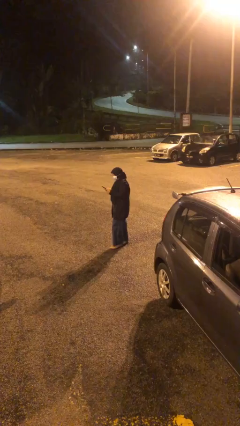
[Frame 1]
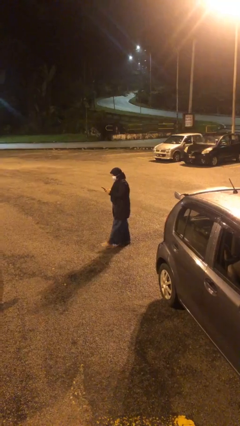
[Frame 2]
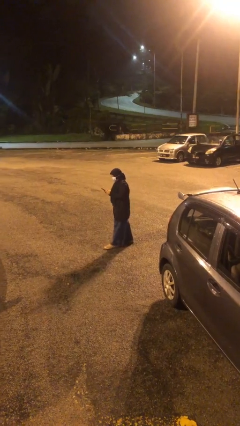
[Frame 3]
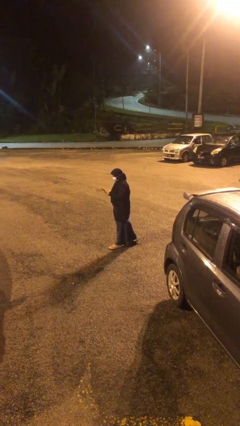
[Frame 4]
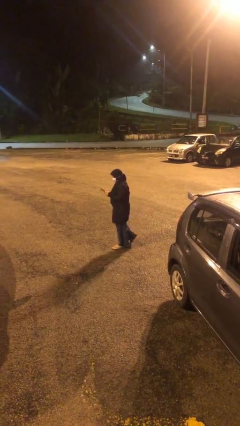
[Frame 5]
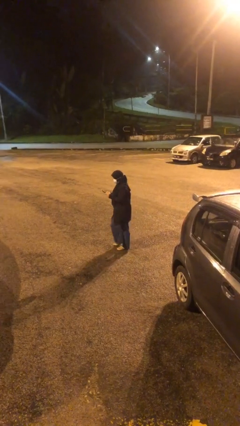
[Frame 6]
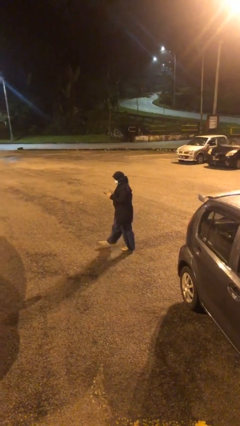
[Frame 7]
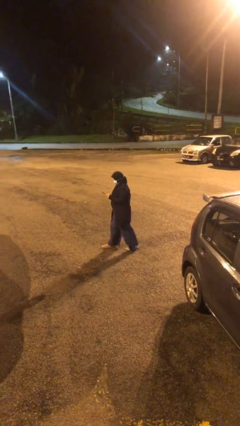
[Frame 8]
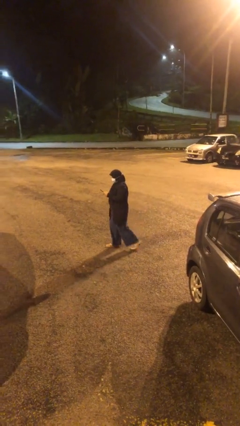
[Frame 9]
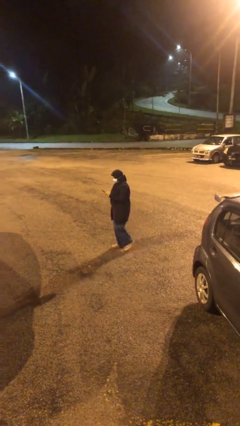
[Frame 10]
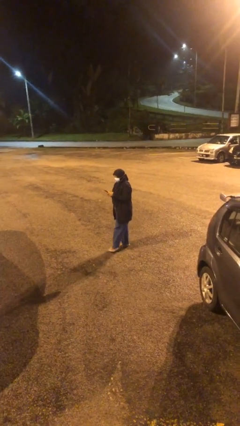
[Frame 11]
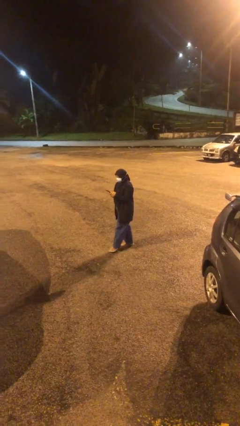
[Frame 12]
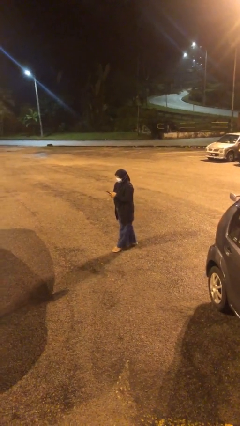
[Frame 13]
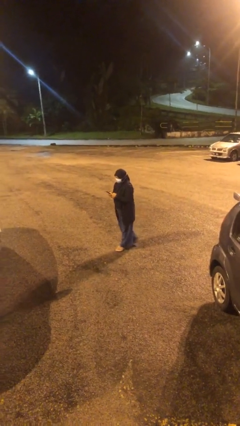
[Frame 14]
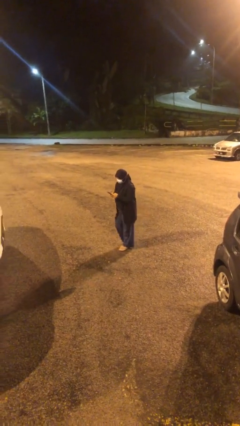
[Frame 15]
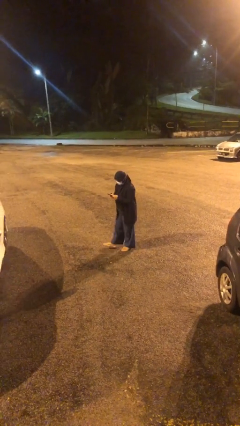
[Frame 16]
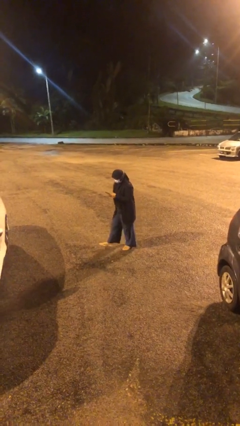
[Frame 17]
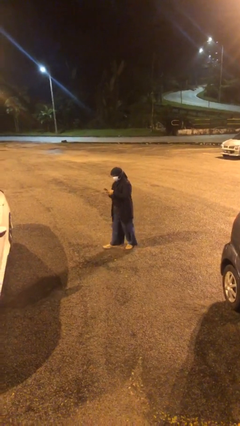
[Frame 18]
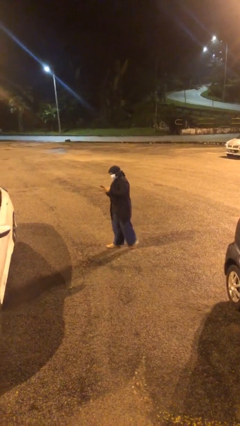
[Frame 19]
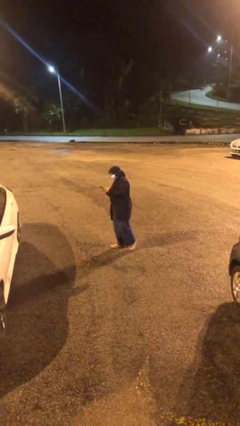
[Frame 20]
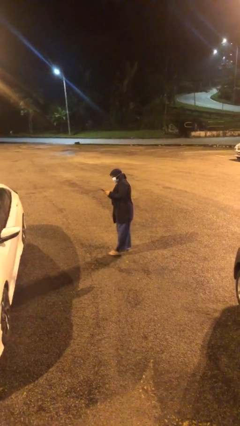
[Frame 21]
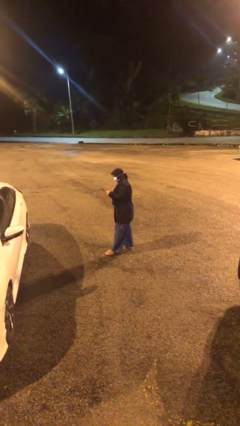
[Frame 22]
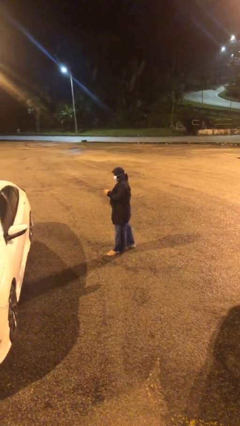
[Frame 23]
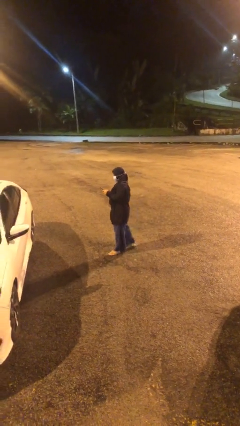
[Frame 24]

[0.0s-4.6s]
person texts on phone

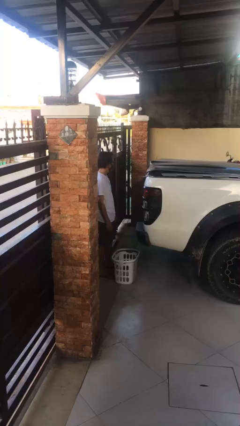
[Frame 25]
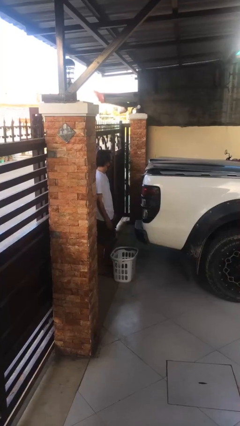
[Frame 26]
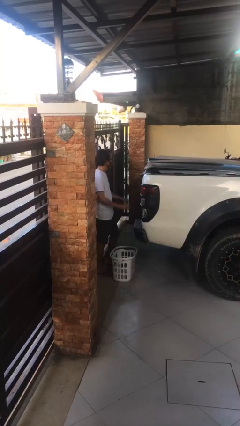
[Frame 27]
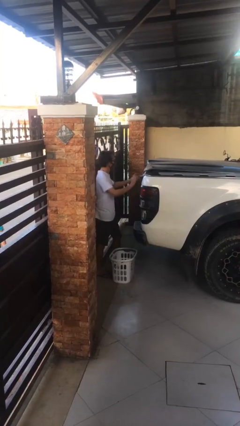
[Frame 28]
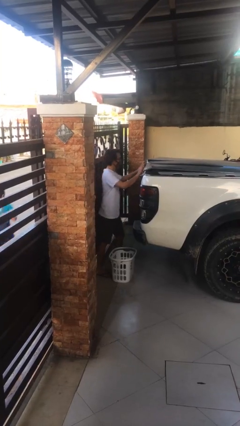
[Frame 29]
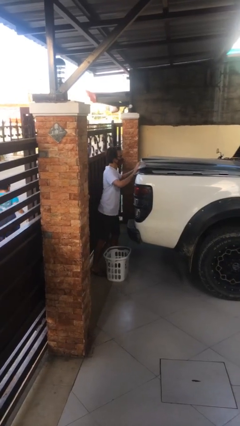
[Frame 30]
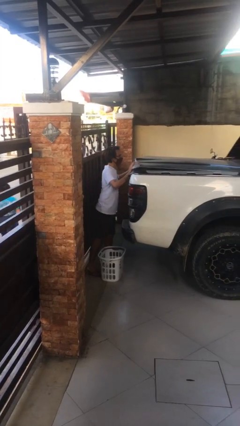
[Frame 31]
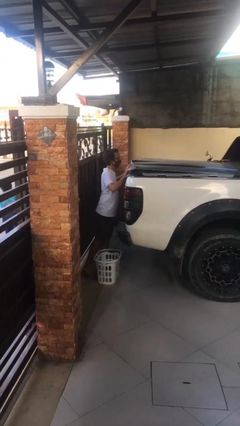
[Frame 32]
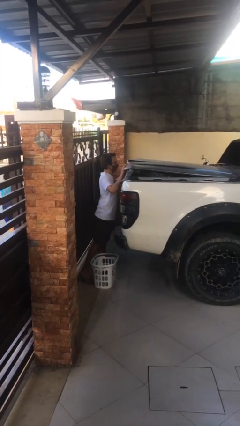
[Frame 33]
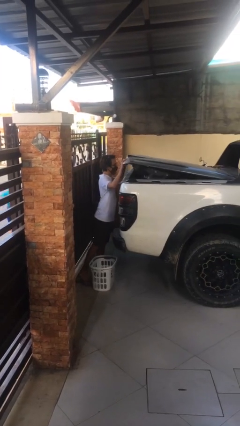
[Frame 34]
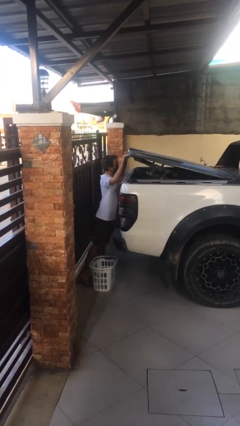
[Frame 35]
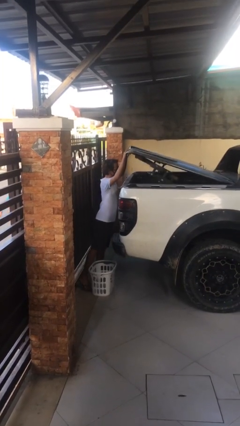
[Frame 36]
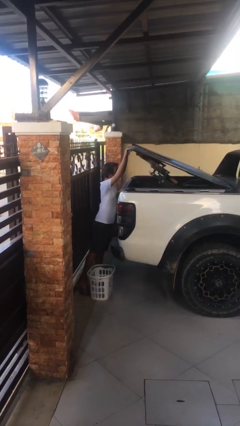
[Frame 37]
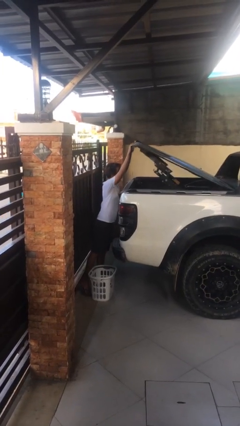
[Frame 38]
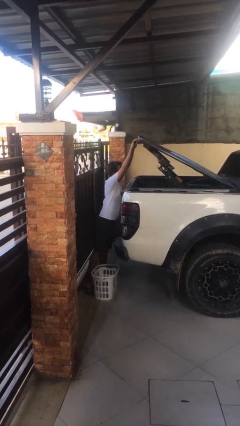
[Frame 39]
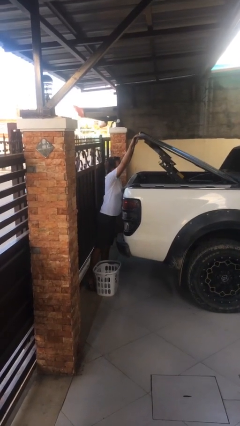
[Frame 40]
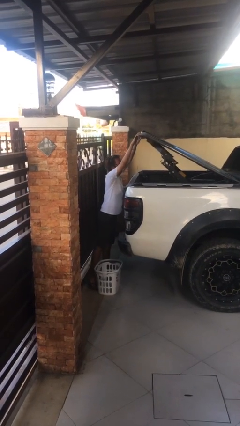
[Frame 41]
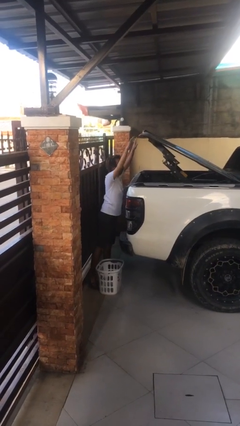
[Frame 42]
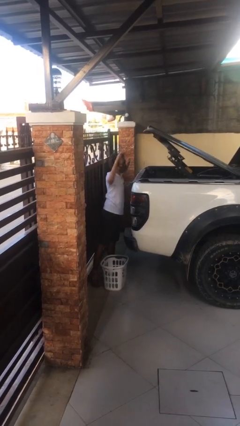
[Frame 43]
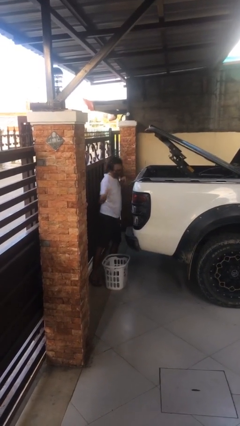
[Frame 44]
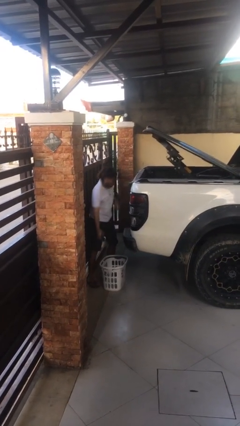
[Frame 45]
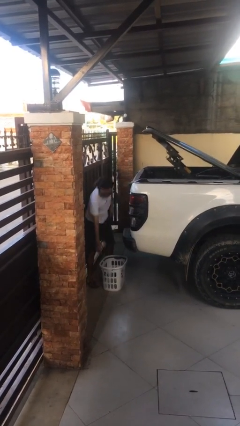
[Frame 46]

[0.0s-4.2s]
person opens car trunk

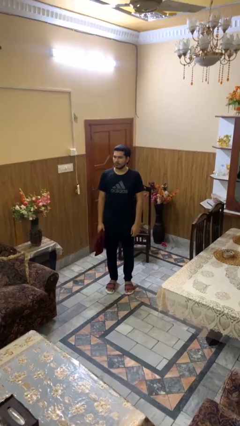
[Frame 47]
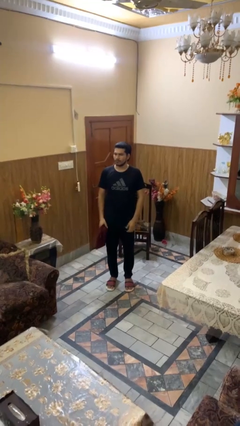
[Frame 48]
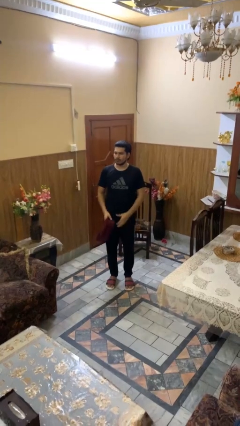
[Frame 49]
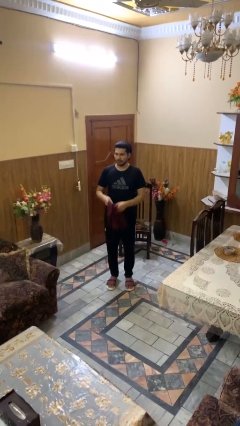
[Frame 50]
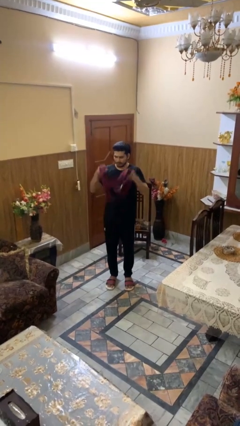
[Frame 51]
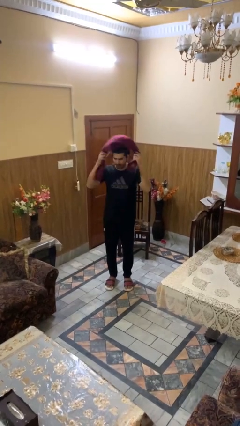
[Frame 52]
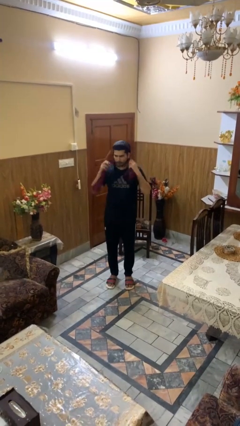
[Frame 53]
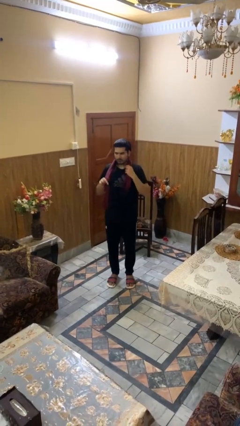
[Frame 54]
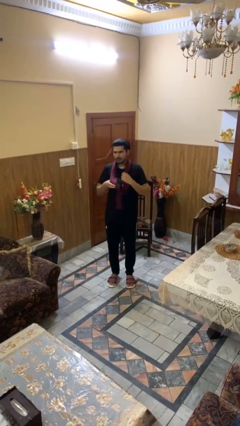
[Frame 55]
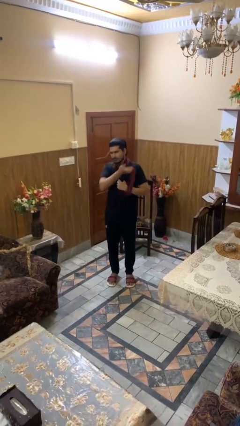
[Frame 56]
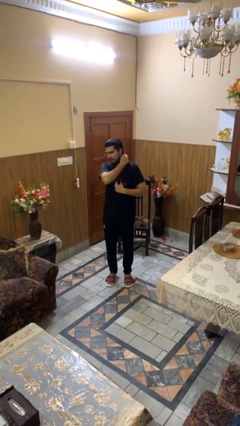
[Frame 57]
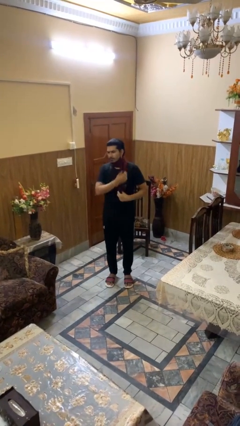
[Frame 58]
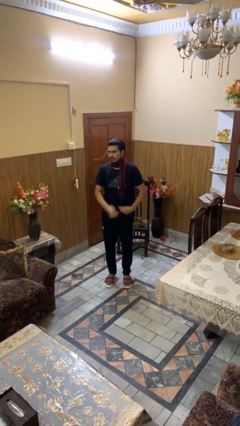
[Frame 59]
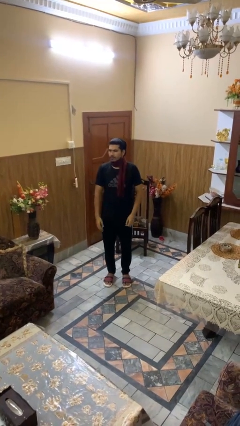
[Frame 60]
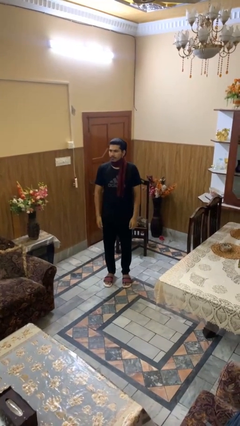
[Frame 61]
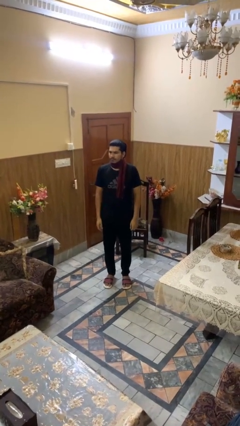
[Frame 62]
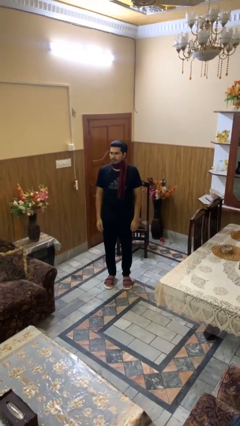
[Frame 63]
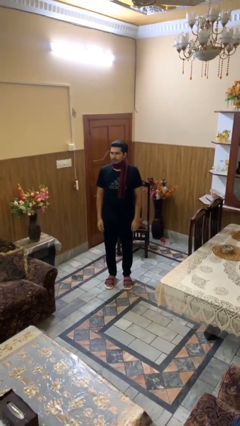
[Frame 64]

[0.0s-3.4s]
person puts on scarf

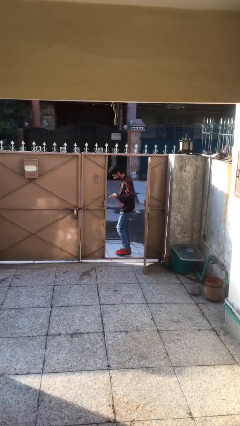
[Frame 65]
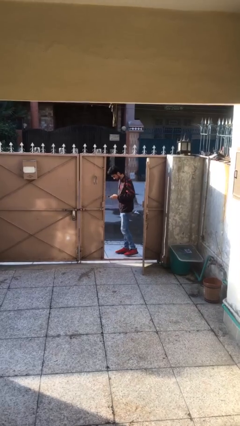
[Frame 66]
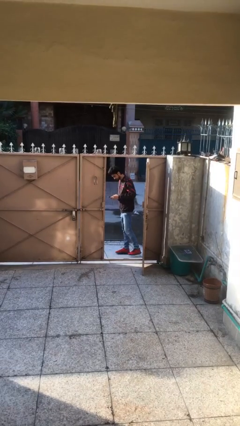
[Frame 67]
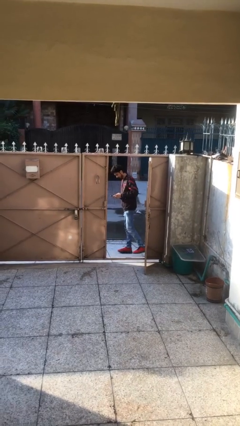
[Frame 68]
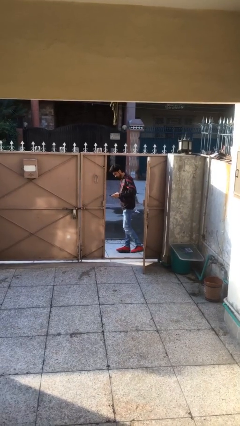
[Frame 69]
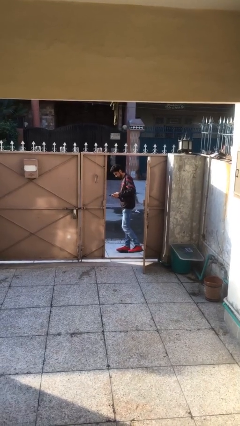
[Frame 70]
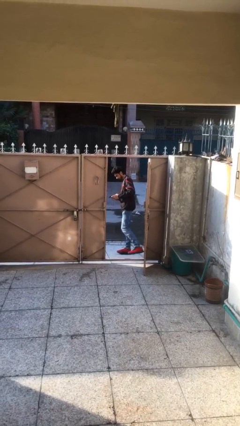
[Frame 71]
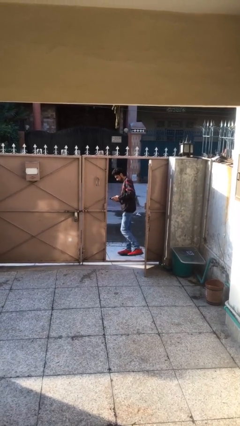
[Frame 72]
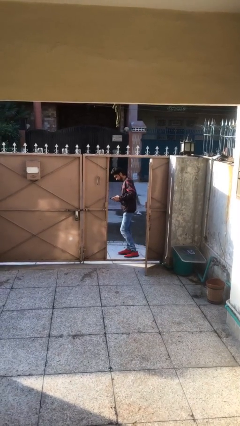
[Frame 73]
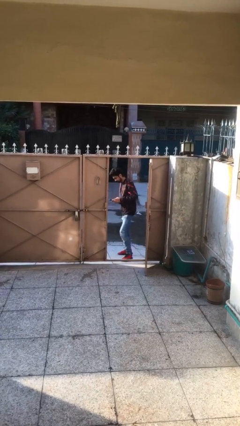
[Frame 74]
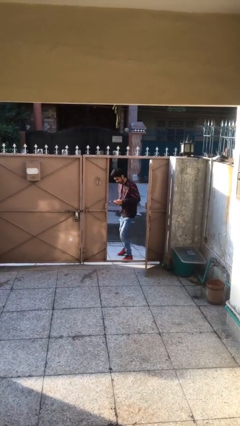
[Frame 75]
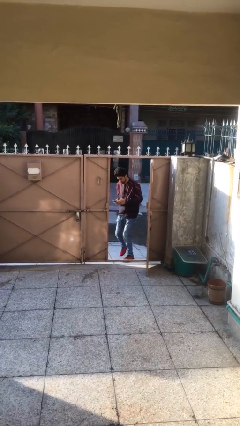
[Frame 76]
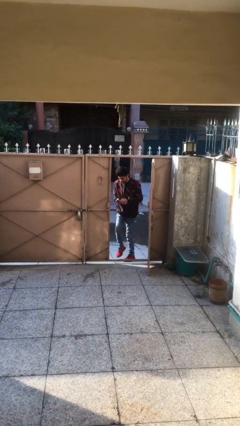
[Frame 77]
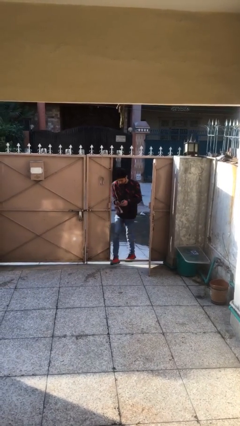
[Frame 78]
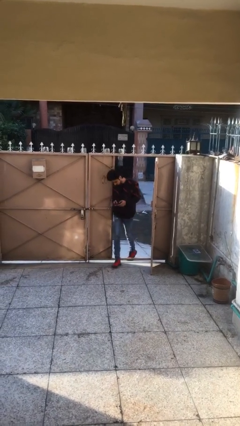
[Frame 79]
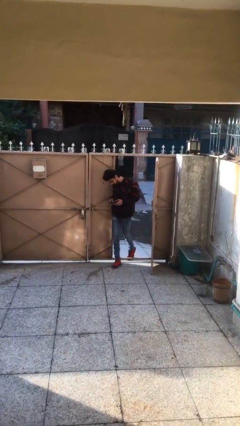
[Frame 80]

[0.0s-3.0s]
person enters scene through structure

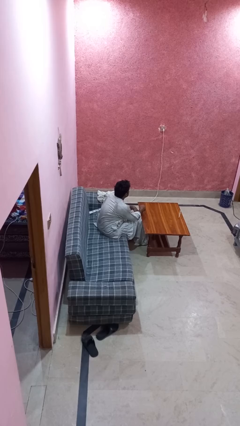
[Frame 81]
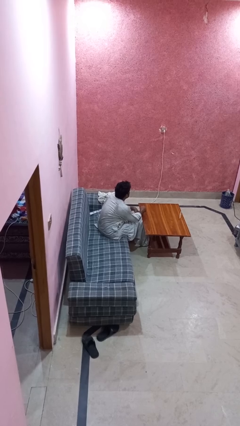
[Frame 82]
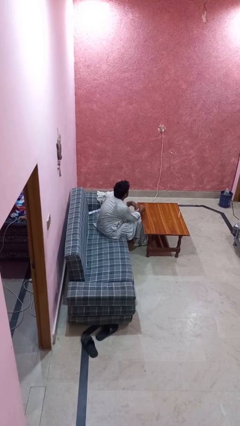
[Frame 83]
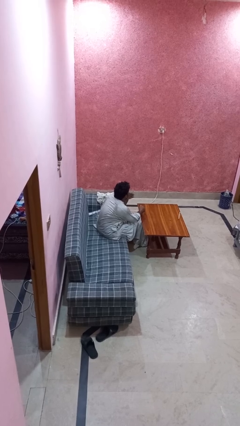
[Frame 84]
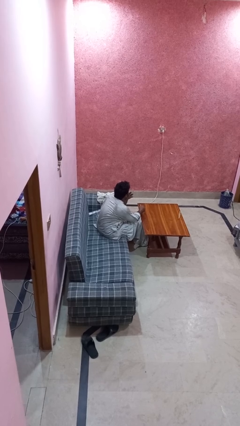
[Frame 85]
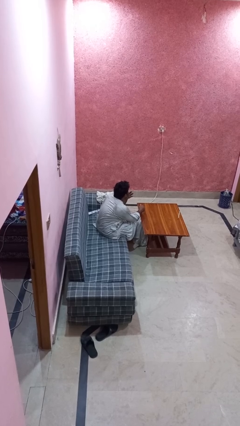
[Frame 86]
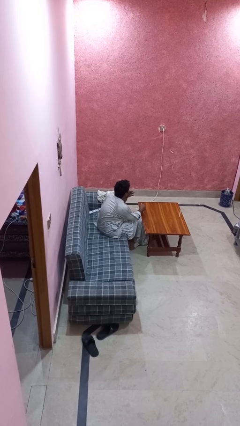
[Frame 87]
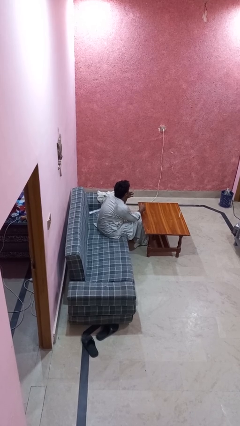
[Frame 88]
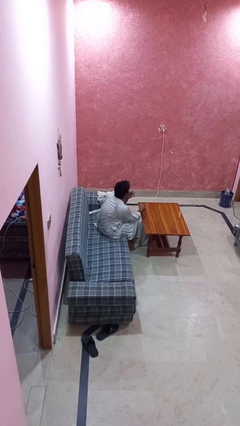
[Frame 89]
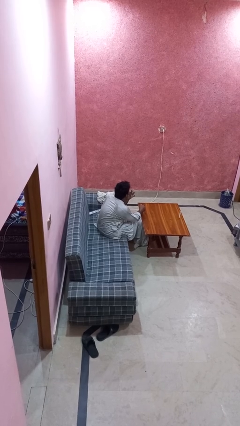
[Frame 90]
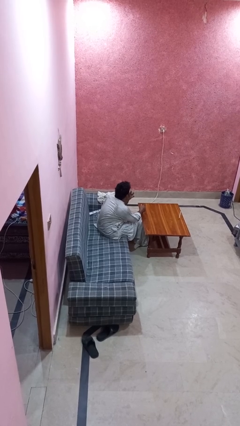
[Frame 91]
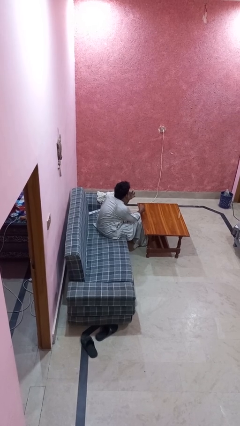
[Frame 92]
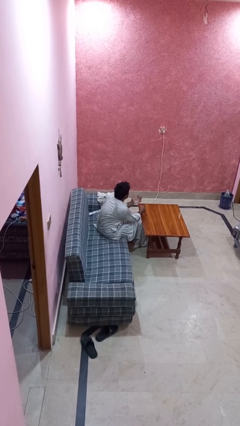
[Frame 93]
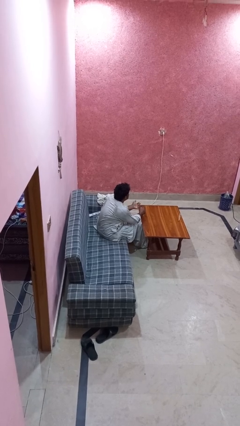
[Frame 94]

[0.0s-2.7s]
person licks fingers

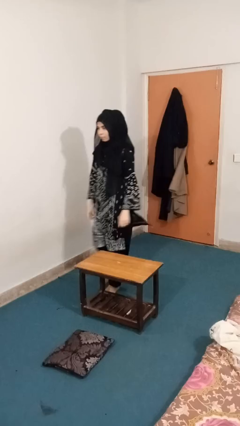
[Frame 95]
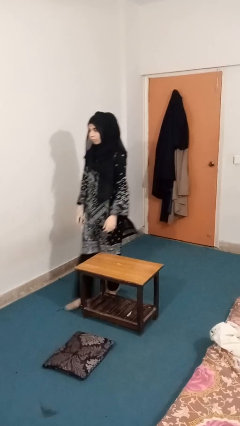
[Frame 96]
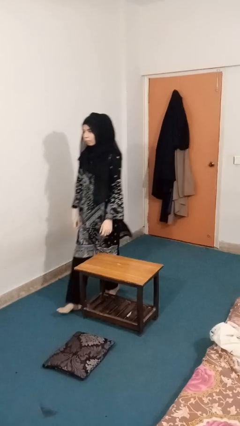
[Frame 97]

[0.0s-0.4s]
person sets upright furniture
